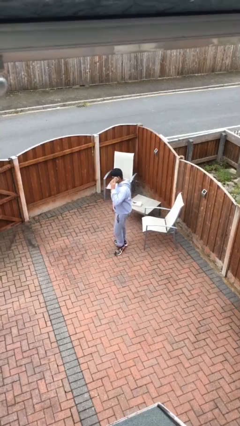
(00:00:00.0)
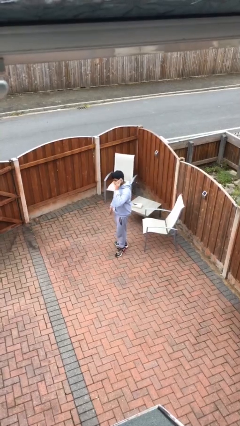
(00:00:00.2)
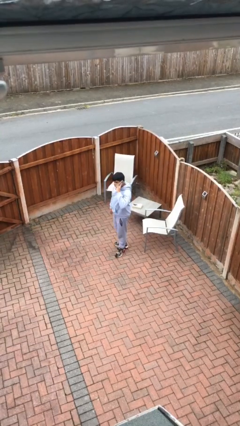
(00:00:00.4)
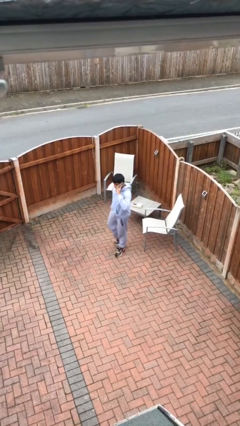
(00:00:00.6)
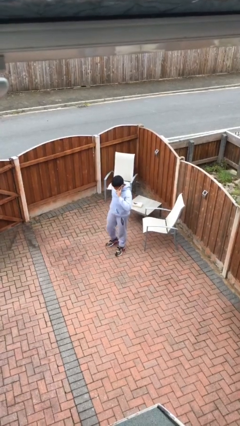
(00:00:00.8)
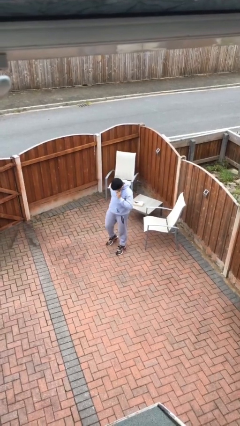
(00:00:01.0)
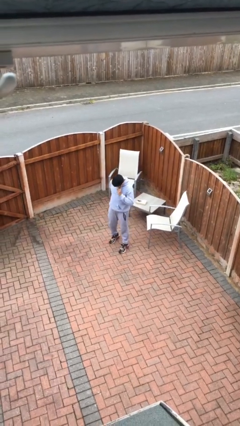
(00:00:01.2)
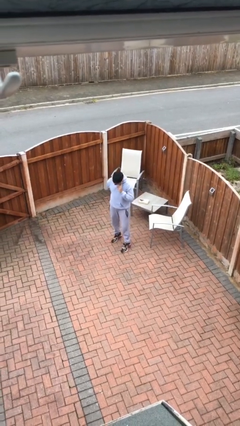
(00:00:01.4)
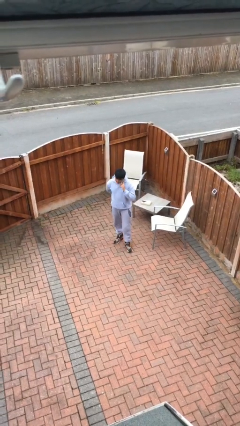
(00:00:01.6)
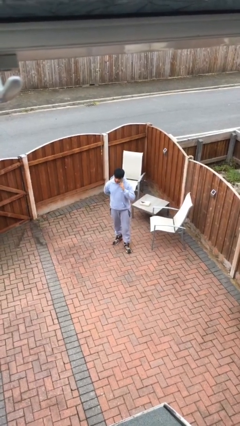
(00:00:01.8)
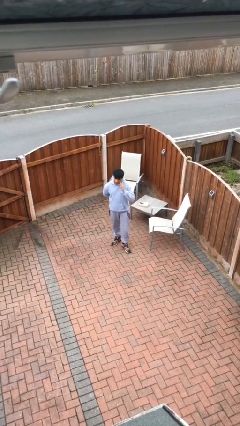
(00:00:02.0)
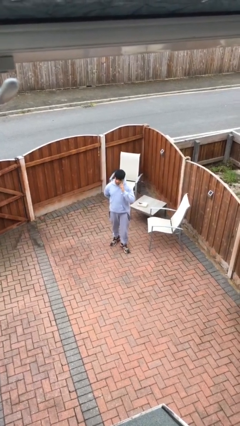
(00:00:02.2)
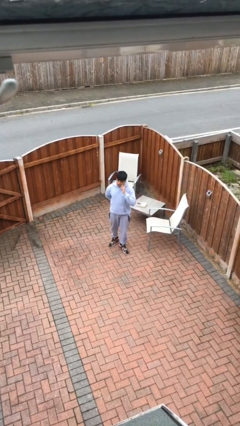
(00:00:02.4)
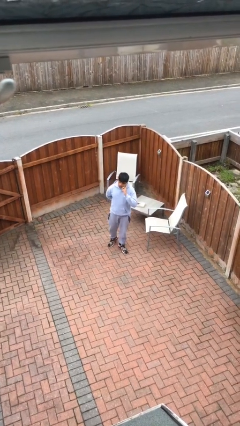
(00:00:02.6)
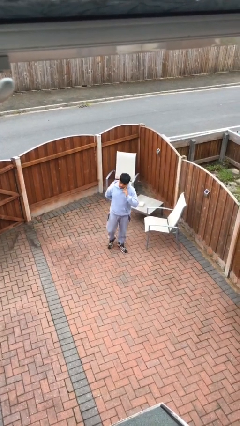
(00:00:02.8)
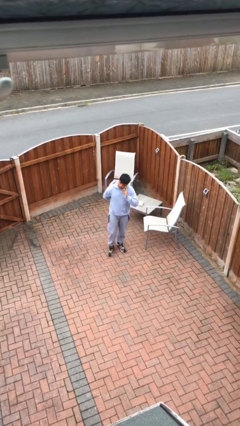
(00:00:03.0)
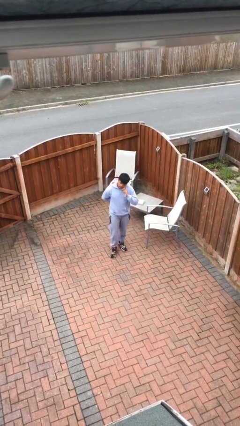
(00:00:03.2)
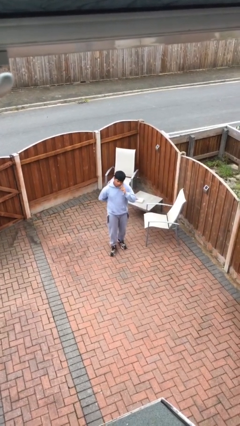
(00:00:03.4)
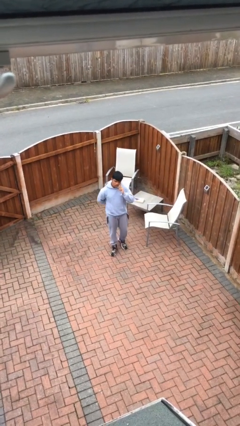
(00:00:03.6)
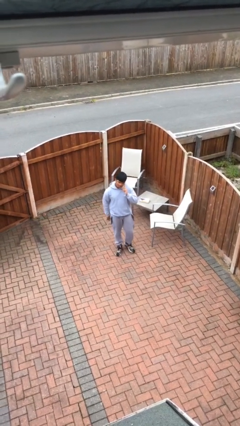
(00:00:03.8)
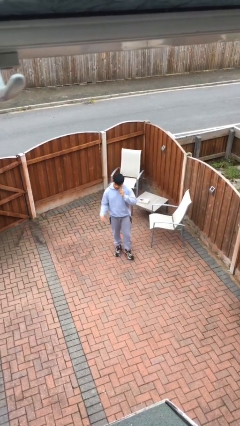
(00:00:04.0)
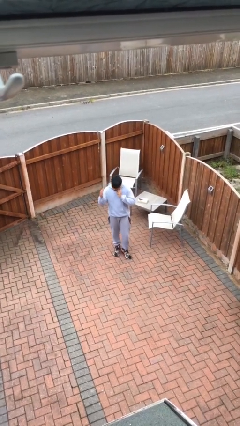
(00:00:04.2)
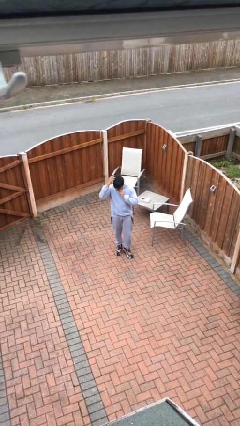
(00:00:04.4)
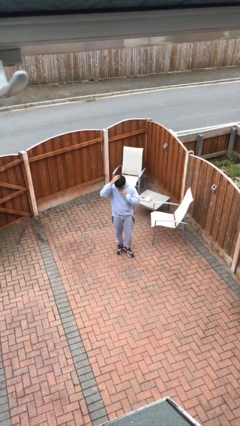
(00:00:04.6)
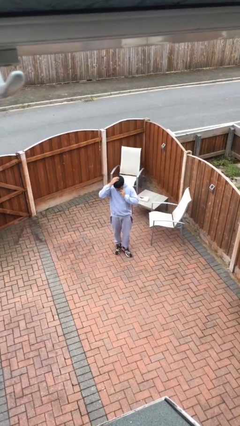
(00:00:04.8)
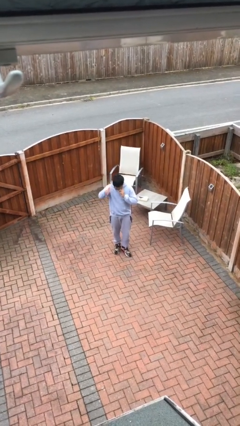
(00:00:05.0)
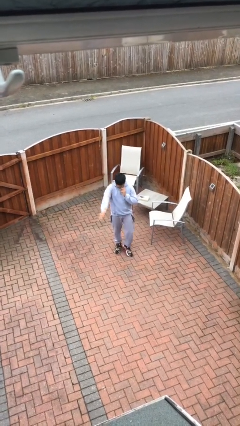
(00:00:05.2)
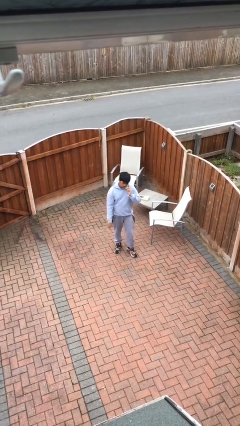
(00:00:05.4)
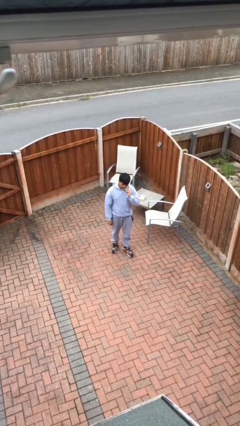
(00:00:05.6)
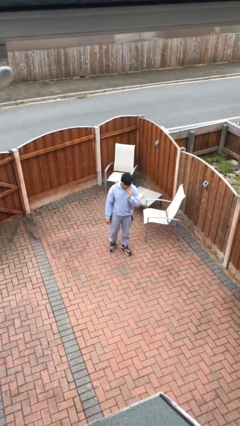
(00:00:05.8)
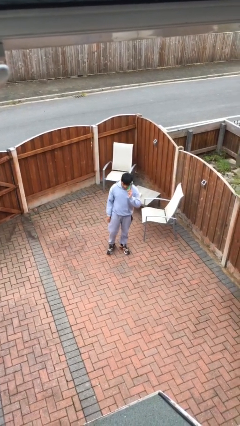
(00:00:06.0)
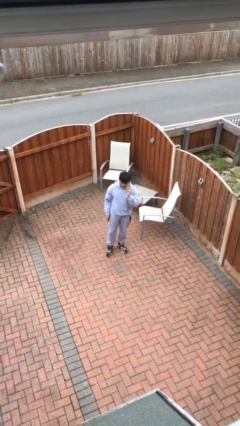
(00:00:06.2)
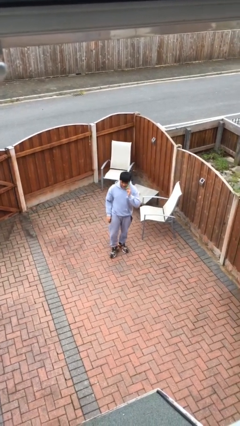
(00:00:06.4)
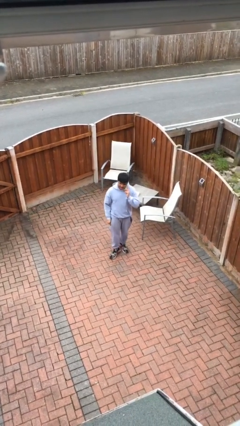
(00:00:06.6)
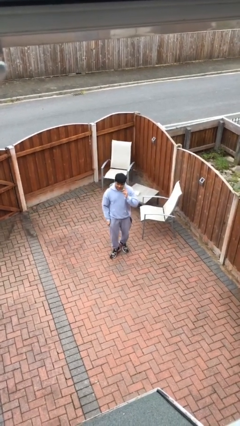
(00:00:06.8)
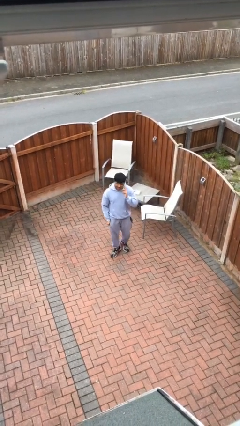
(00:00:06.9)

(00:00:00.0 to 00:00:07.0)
person talks on phone

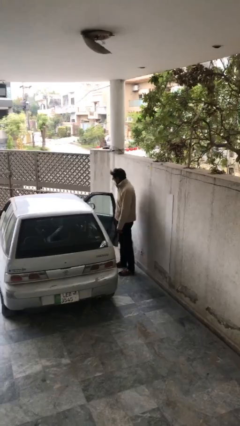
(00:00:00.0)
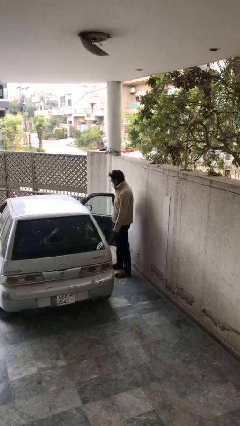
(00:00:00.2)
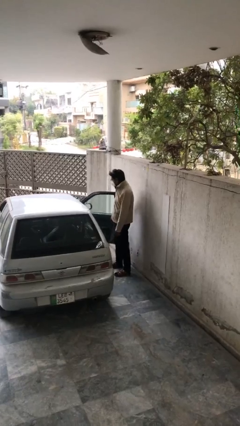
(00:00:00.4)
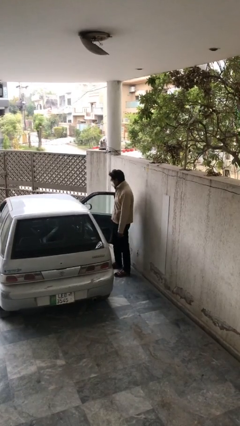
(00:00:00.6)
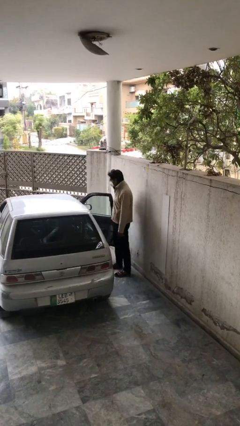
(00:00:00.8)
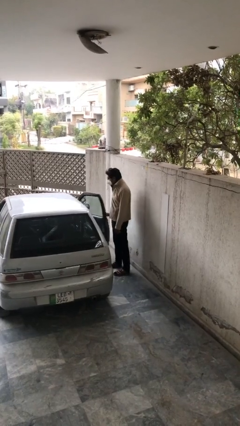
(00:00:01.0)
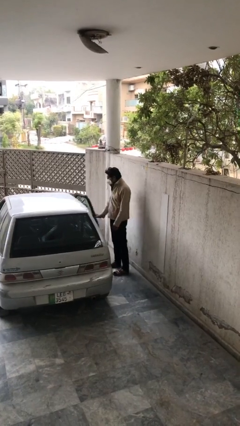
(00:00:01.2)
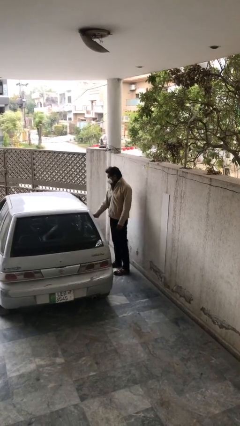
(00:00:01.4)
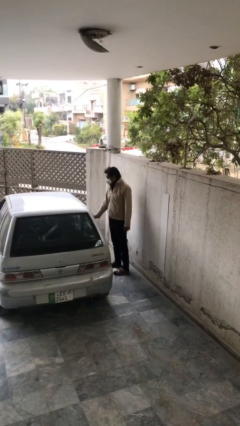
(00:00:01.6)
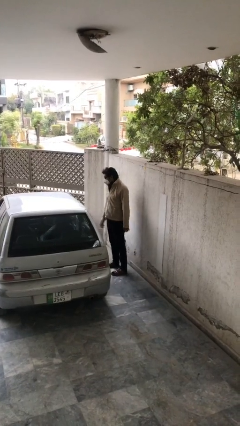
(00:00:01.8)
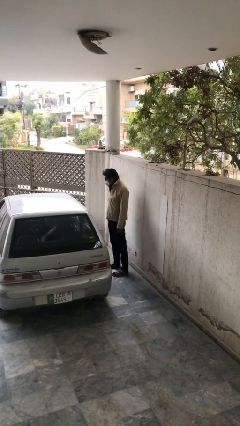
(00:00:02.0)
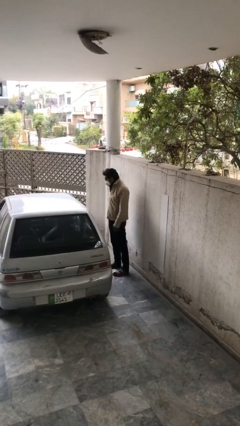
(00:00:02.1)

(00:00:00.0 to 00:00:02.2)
person closes car door

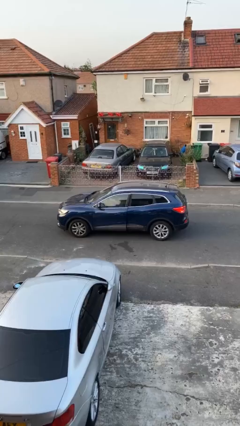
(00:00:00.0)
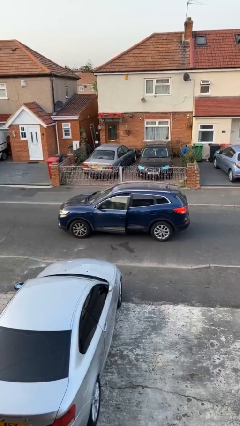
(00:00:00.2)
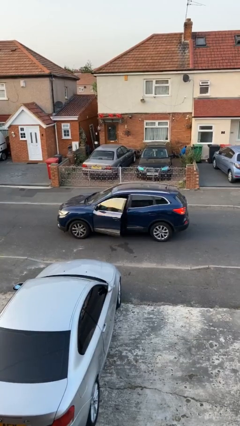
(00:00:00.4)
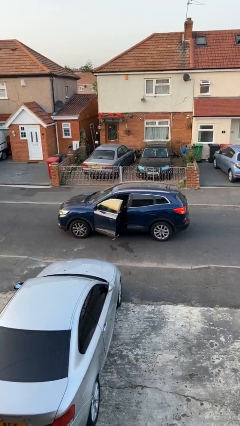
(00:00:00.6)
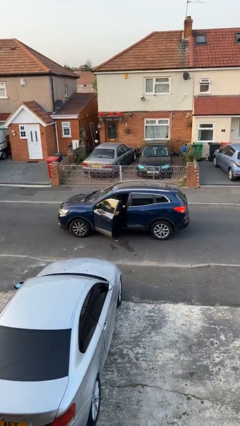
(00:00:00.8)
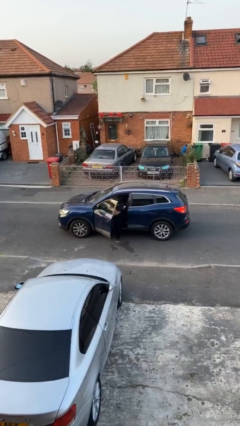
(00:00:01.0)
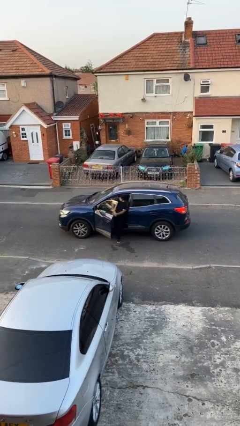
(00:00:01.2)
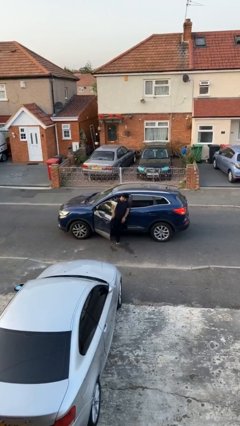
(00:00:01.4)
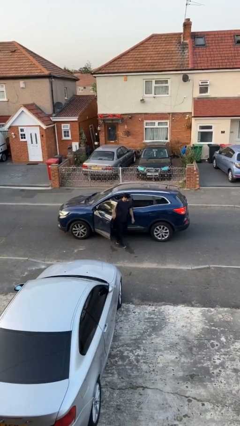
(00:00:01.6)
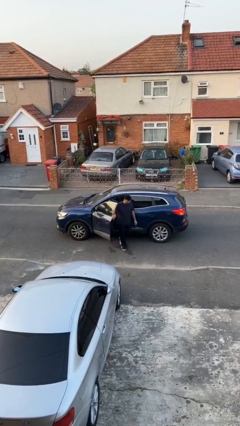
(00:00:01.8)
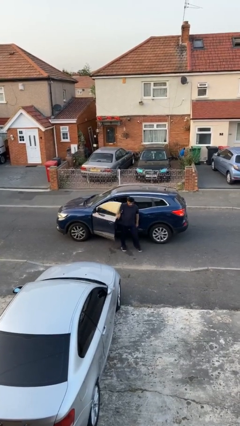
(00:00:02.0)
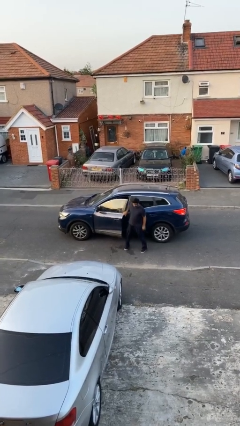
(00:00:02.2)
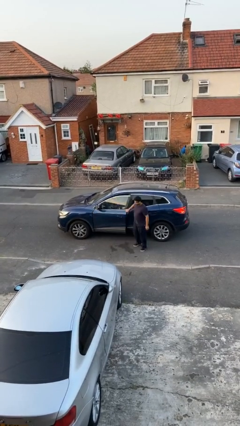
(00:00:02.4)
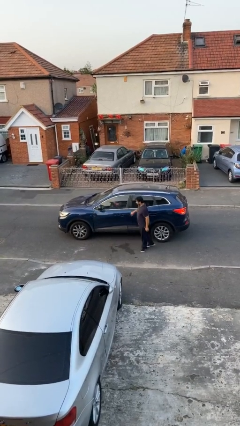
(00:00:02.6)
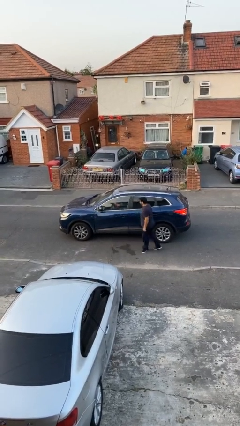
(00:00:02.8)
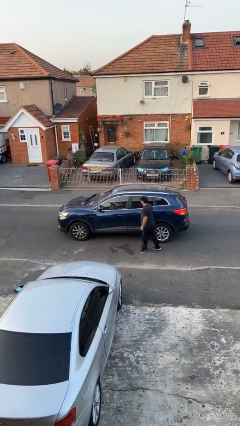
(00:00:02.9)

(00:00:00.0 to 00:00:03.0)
car drops off person

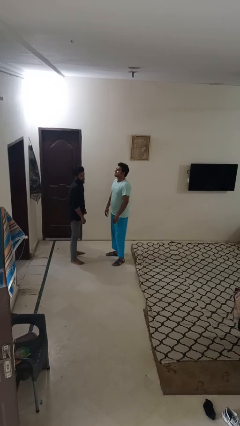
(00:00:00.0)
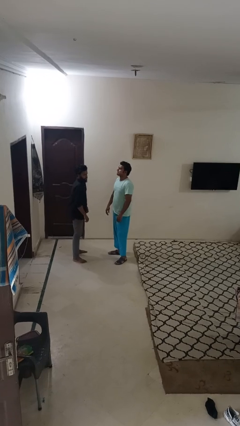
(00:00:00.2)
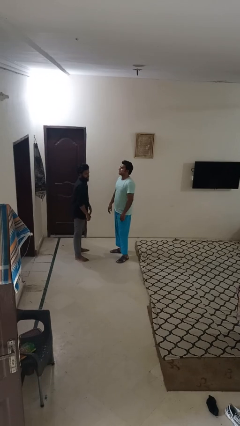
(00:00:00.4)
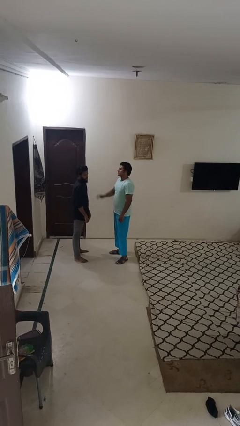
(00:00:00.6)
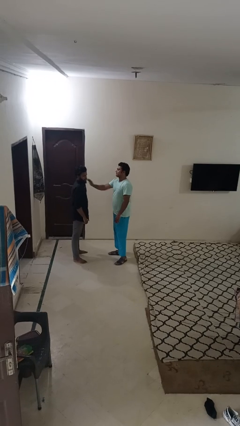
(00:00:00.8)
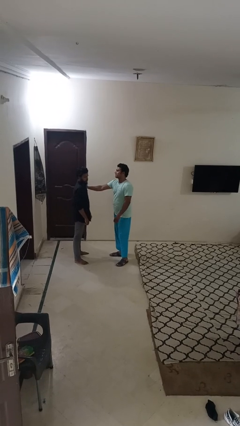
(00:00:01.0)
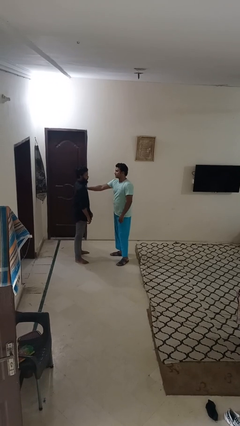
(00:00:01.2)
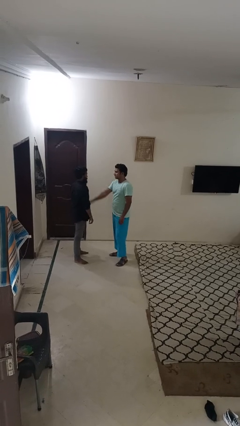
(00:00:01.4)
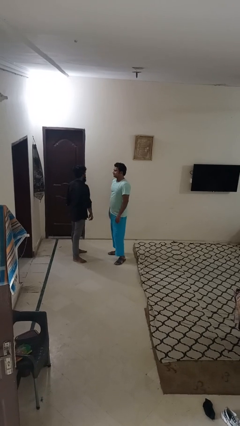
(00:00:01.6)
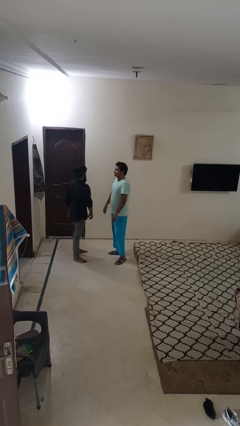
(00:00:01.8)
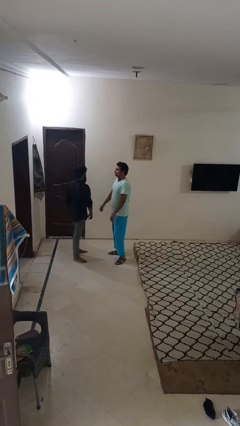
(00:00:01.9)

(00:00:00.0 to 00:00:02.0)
person shoves person

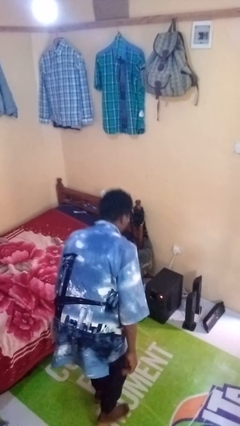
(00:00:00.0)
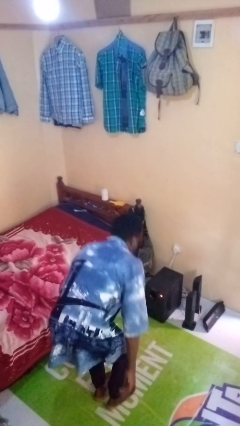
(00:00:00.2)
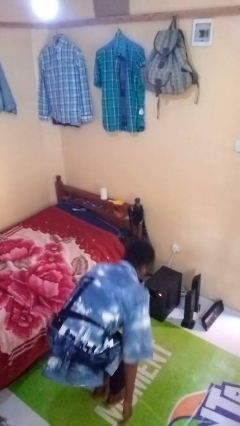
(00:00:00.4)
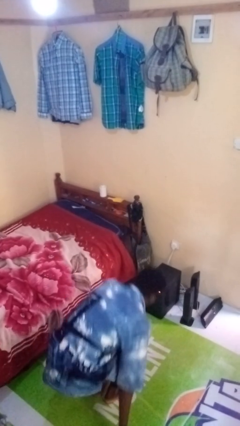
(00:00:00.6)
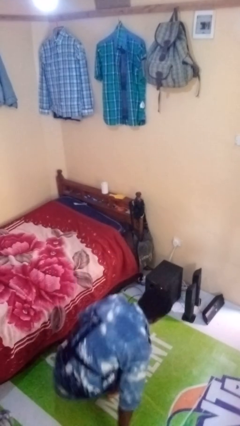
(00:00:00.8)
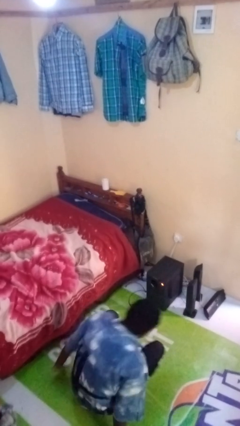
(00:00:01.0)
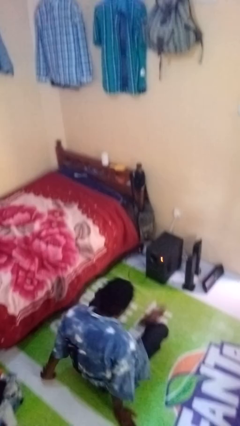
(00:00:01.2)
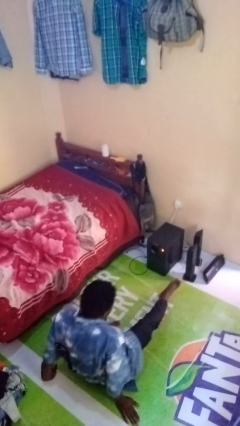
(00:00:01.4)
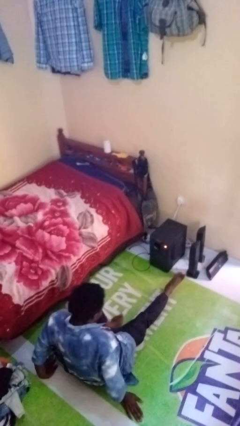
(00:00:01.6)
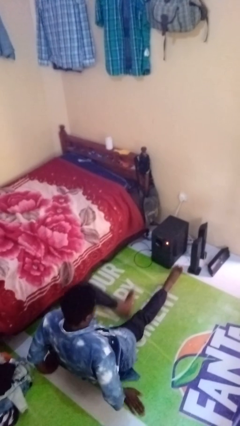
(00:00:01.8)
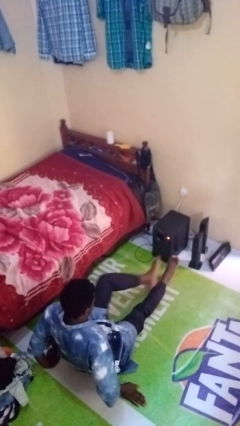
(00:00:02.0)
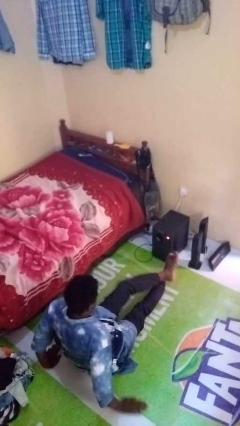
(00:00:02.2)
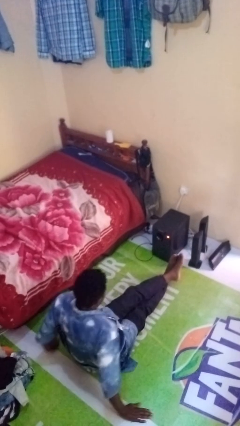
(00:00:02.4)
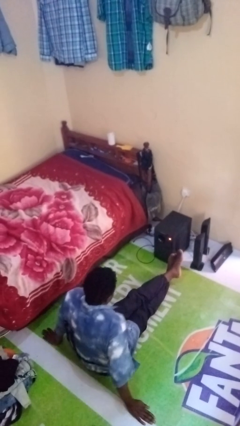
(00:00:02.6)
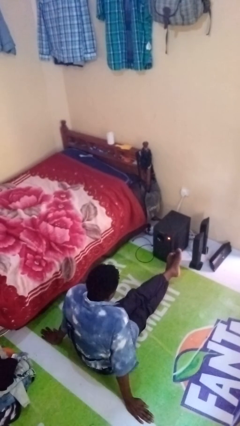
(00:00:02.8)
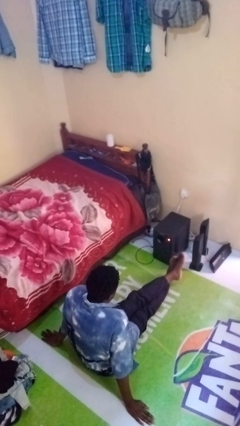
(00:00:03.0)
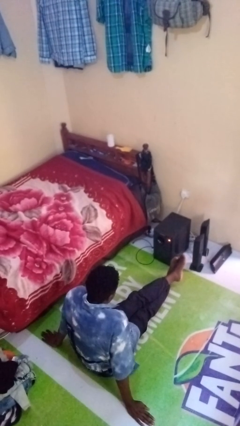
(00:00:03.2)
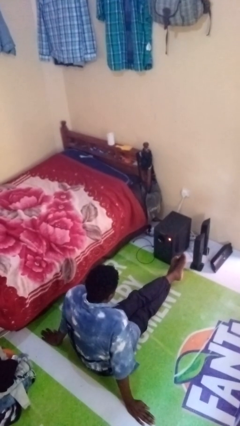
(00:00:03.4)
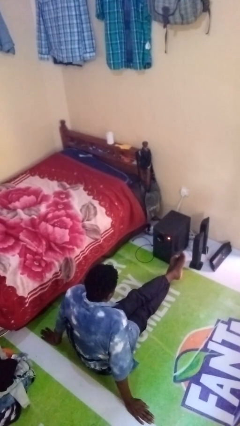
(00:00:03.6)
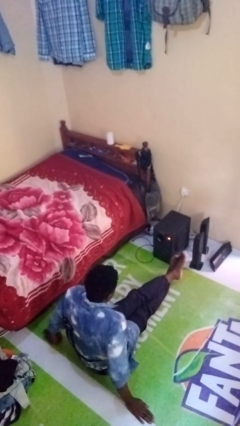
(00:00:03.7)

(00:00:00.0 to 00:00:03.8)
person sits crisscross
